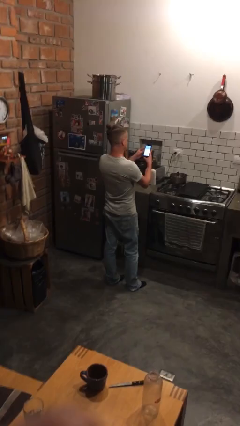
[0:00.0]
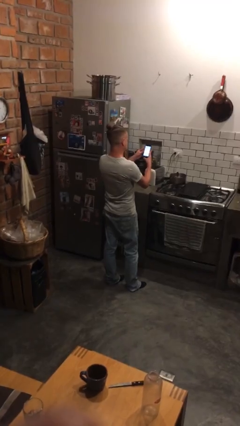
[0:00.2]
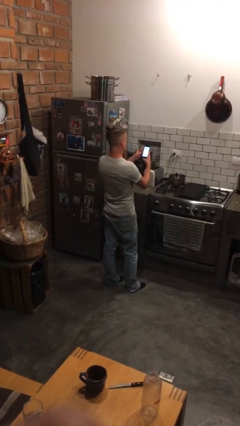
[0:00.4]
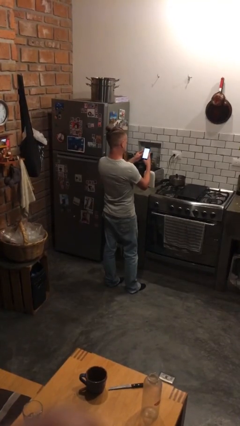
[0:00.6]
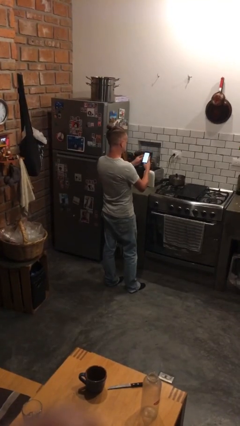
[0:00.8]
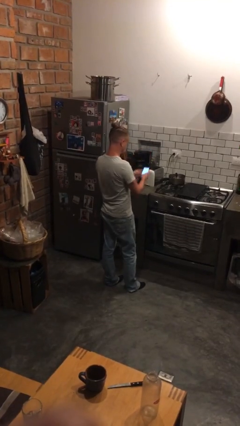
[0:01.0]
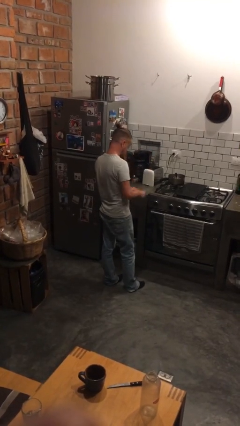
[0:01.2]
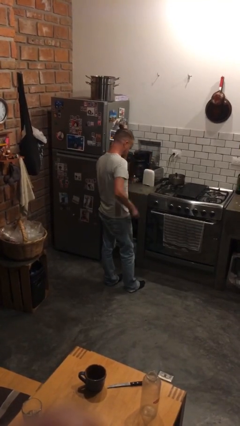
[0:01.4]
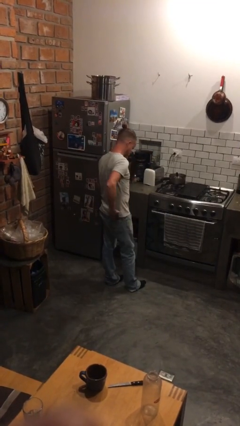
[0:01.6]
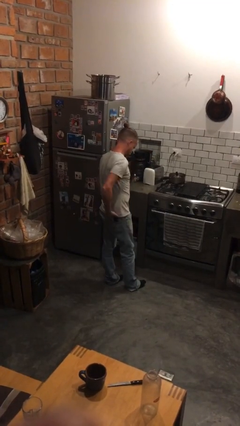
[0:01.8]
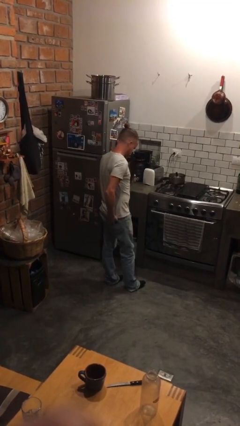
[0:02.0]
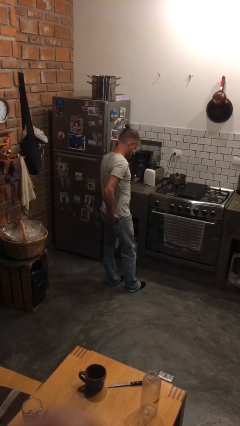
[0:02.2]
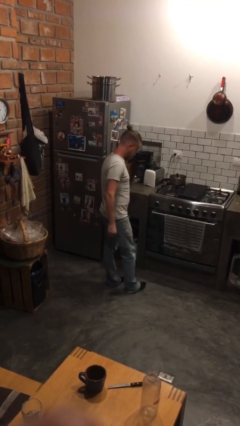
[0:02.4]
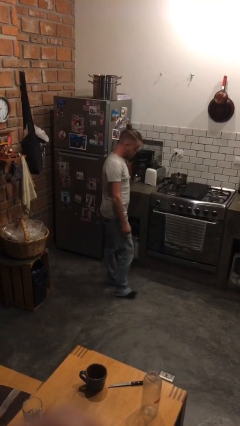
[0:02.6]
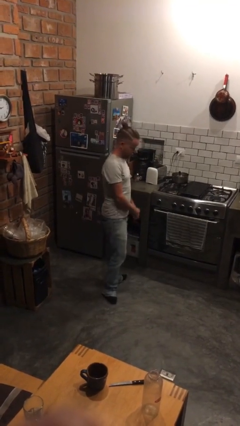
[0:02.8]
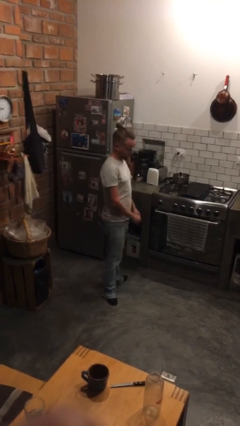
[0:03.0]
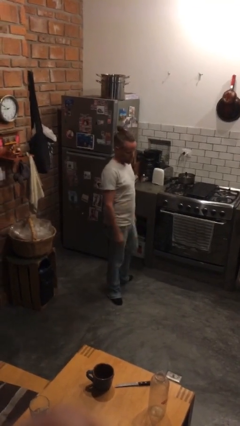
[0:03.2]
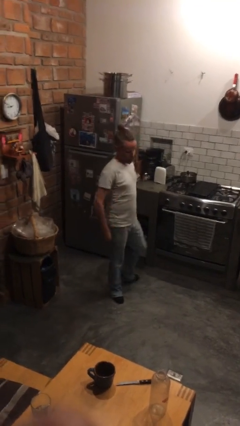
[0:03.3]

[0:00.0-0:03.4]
person puts phone into pocket

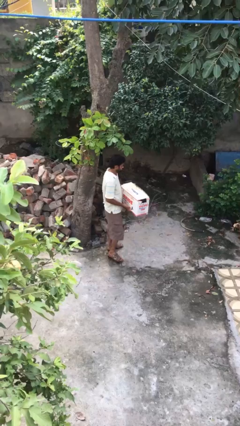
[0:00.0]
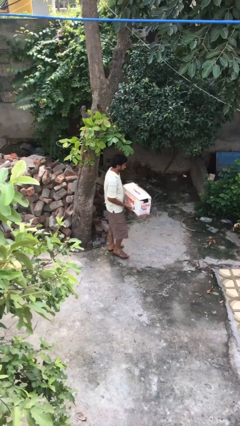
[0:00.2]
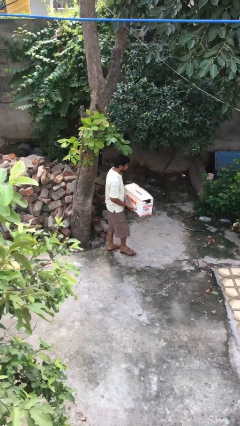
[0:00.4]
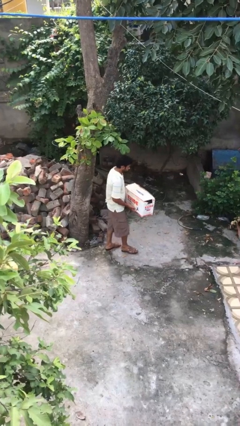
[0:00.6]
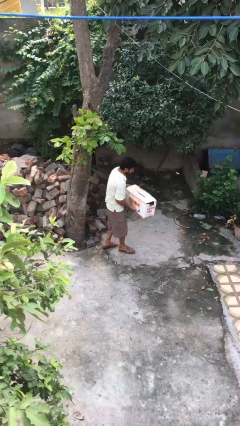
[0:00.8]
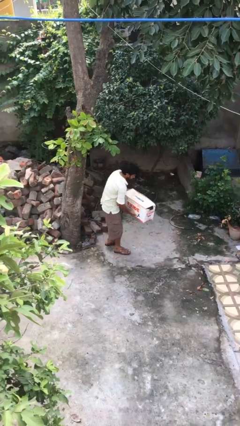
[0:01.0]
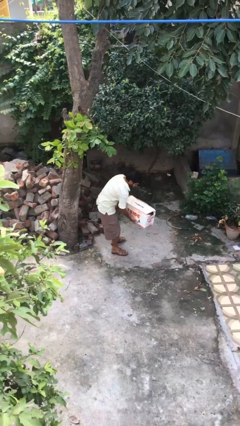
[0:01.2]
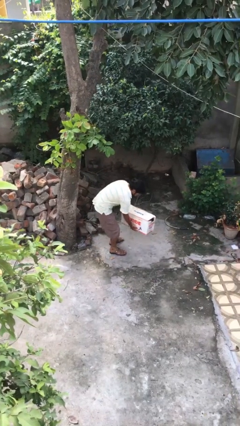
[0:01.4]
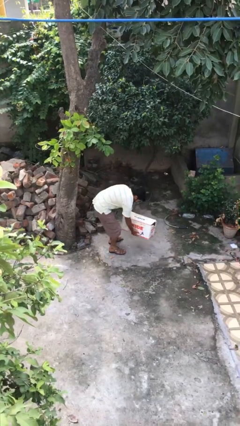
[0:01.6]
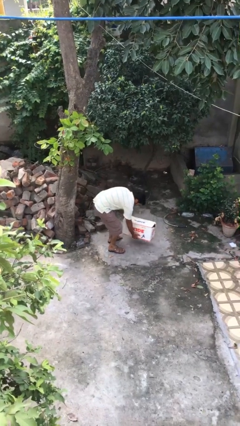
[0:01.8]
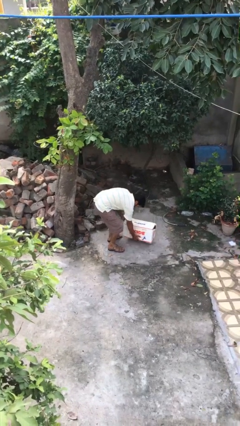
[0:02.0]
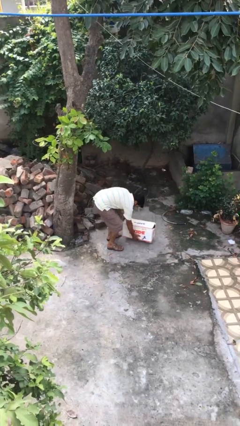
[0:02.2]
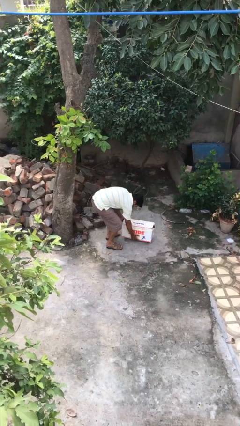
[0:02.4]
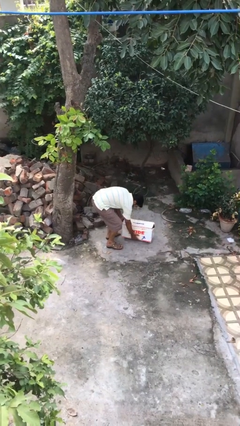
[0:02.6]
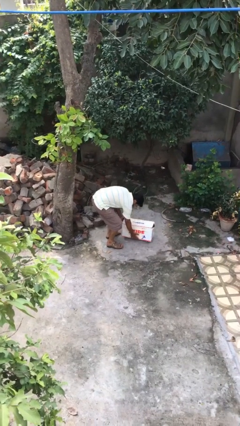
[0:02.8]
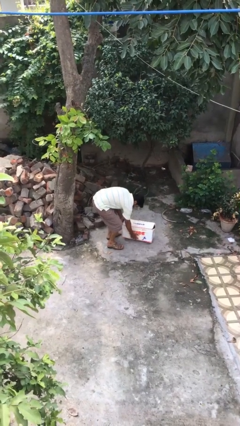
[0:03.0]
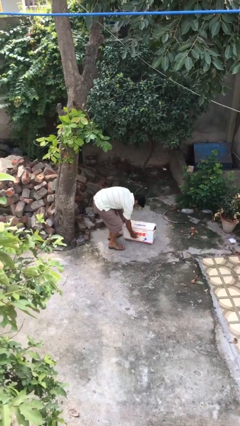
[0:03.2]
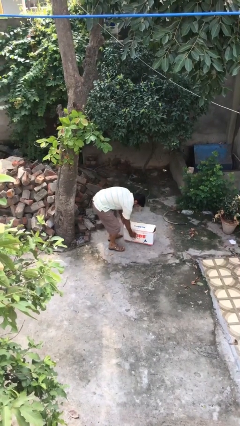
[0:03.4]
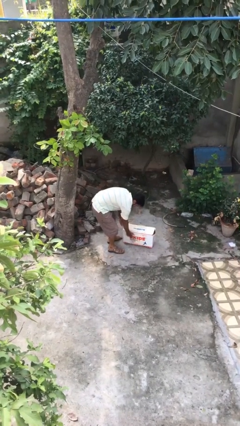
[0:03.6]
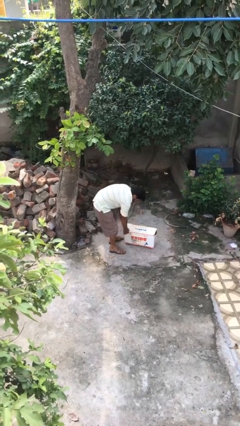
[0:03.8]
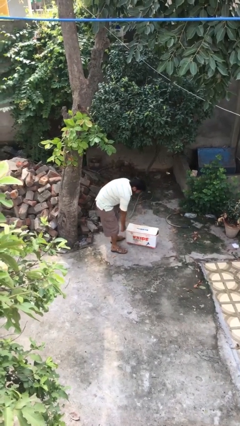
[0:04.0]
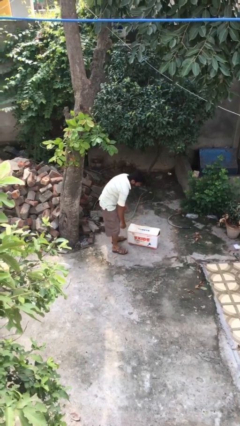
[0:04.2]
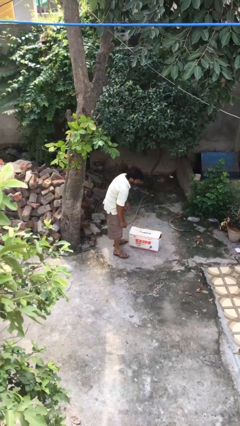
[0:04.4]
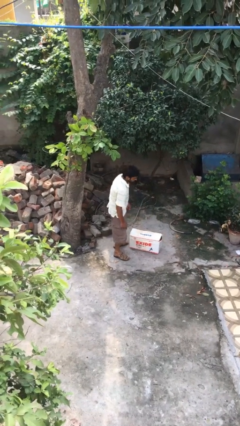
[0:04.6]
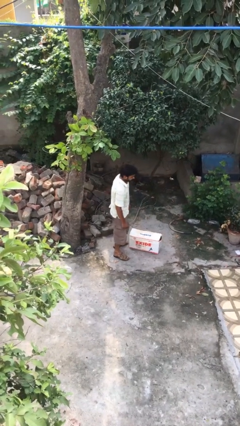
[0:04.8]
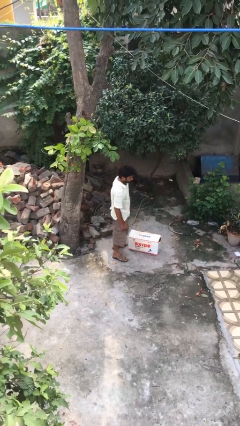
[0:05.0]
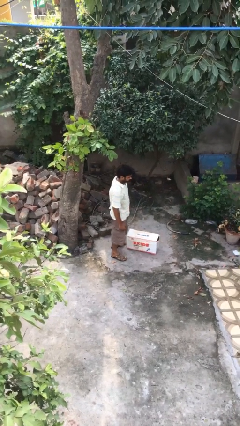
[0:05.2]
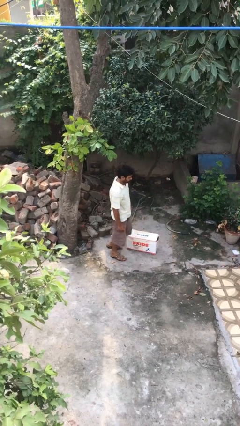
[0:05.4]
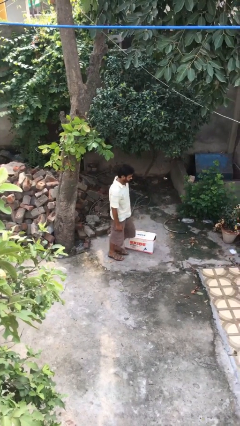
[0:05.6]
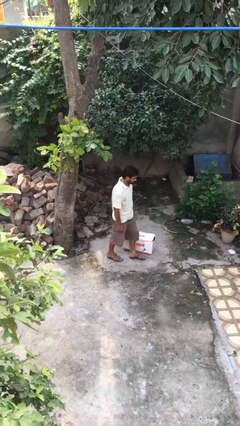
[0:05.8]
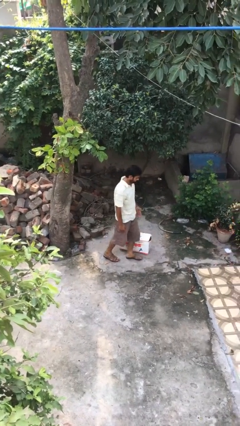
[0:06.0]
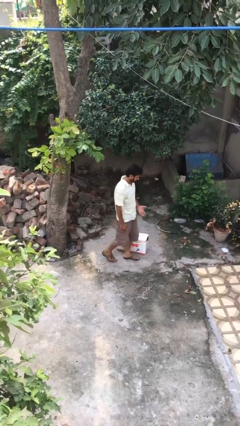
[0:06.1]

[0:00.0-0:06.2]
person puts down object on floor

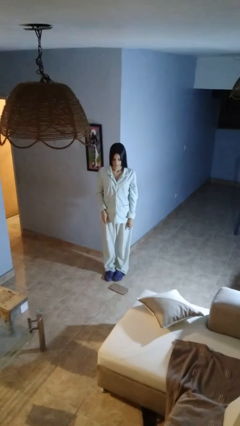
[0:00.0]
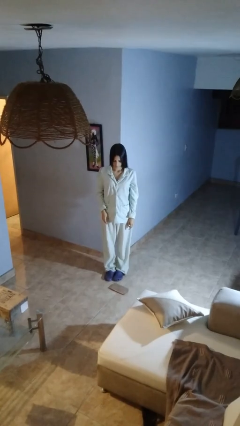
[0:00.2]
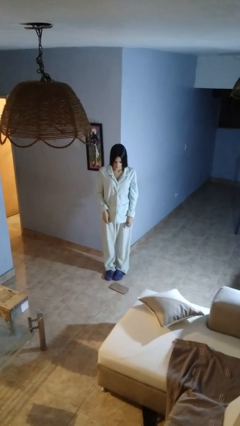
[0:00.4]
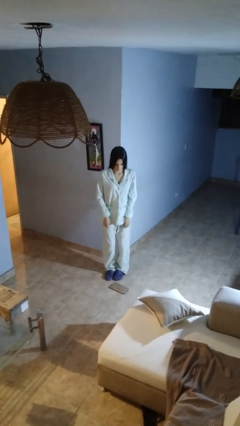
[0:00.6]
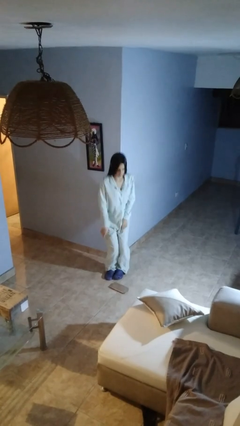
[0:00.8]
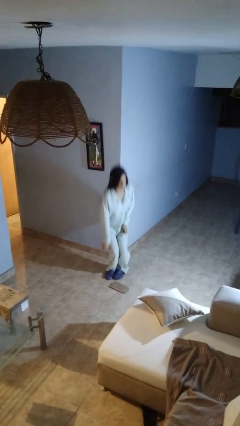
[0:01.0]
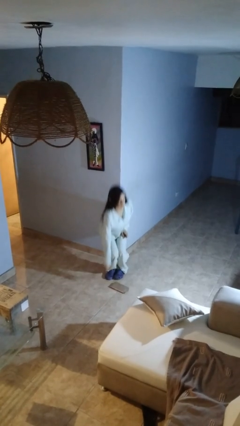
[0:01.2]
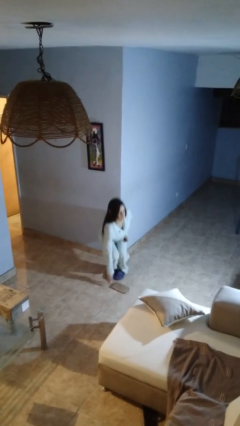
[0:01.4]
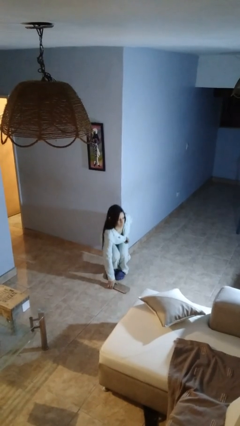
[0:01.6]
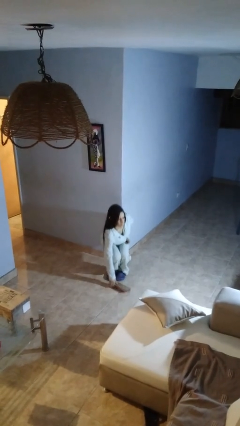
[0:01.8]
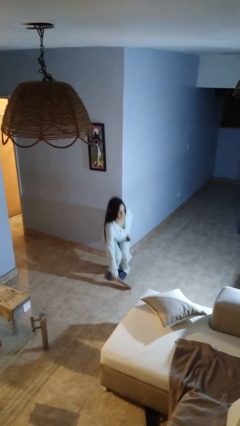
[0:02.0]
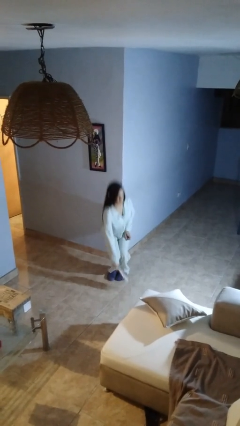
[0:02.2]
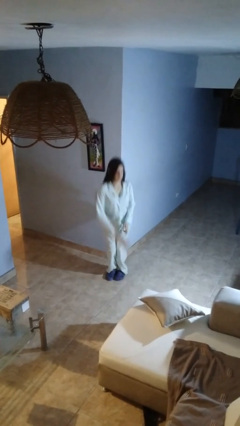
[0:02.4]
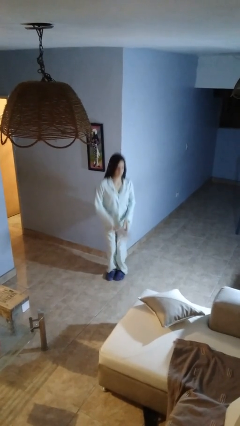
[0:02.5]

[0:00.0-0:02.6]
person picks up object from floor

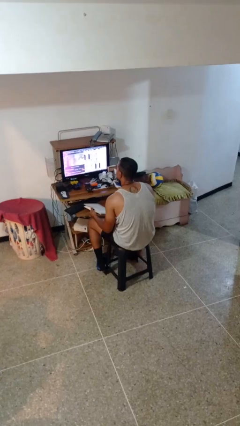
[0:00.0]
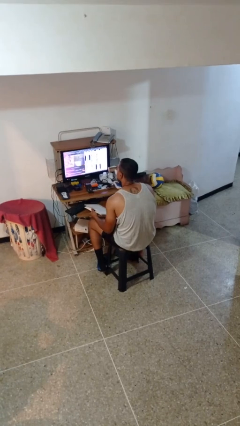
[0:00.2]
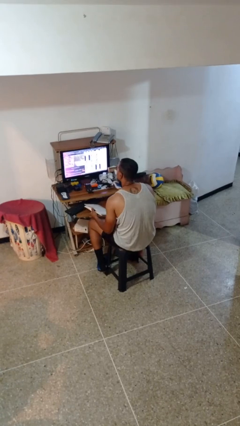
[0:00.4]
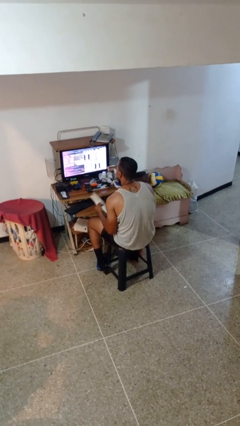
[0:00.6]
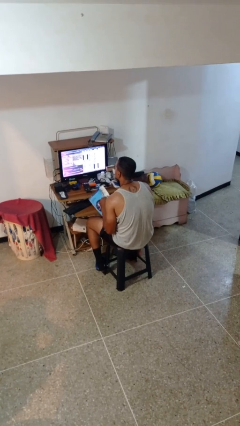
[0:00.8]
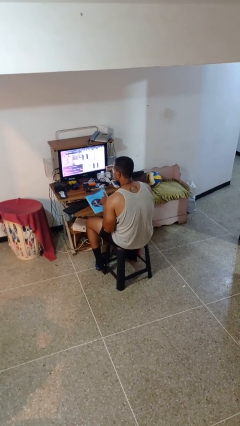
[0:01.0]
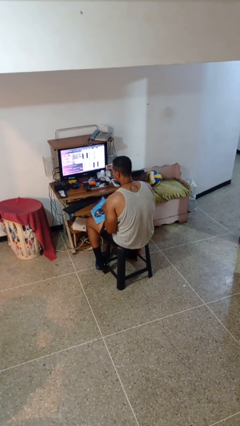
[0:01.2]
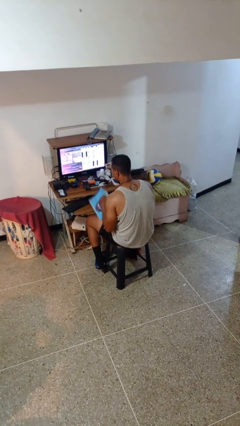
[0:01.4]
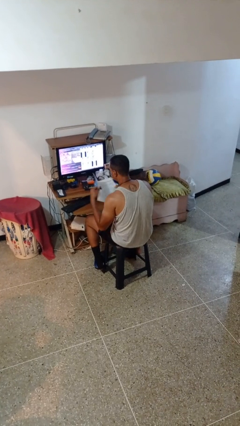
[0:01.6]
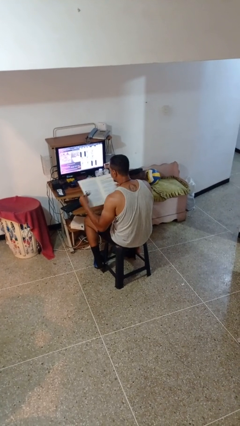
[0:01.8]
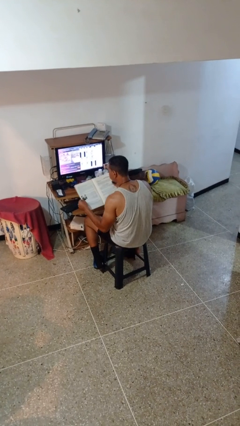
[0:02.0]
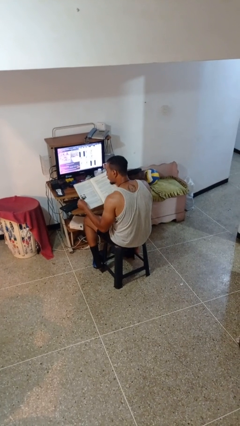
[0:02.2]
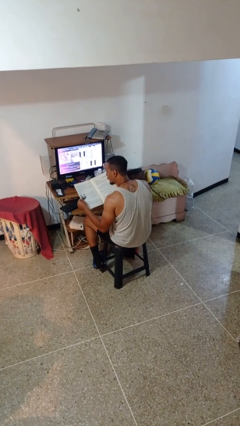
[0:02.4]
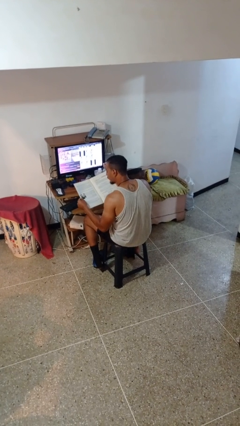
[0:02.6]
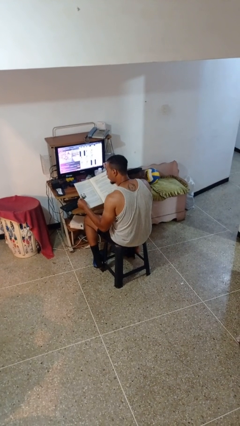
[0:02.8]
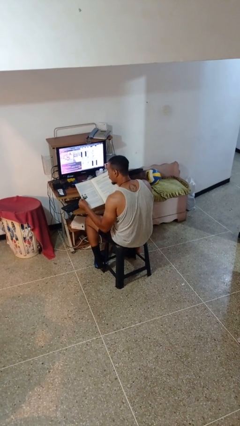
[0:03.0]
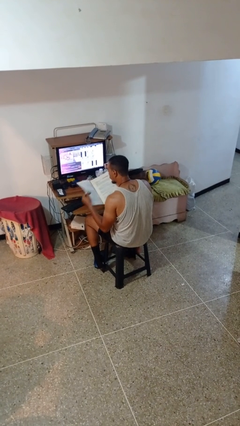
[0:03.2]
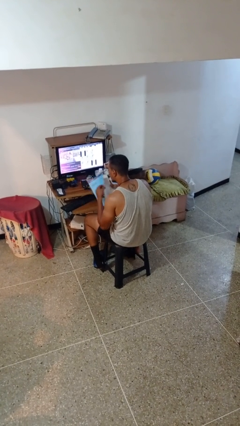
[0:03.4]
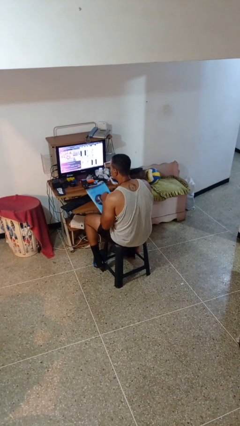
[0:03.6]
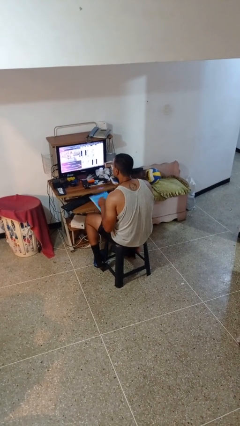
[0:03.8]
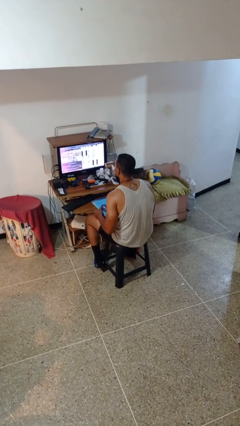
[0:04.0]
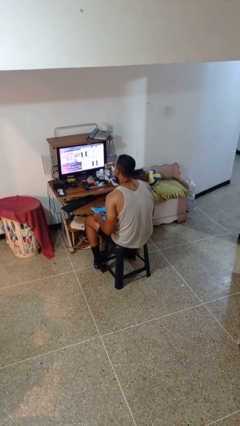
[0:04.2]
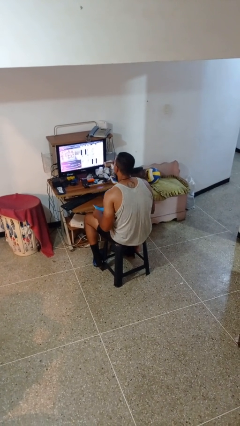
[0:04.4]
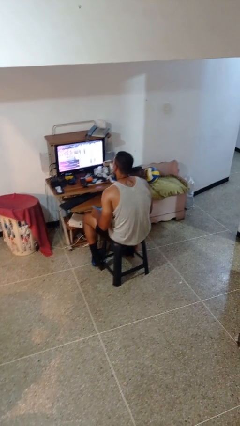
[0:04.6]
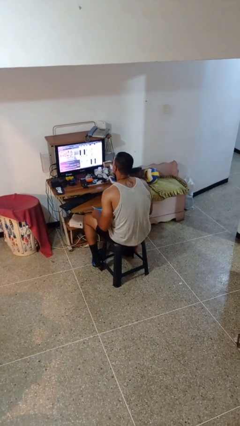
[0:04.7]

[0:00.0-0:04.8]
person reads magazine

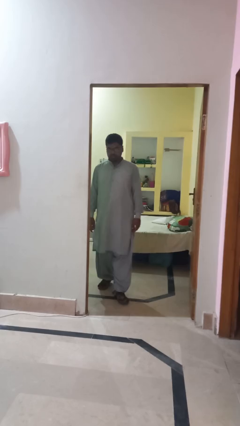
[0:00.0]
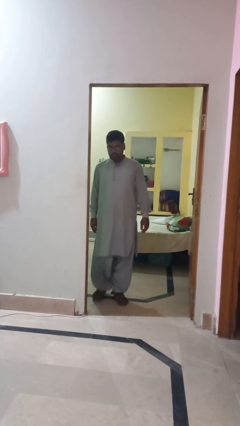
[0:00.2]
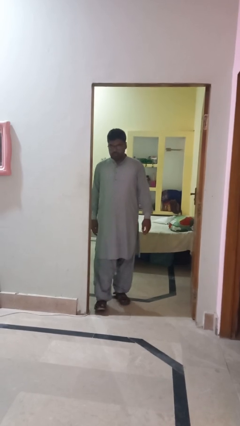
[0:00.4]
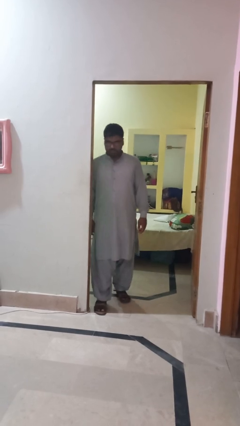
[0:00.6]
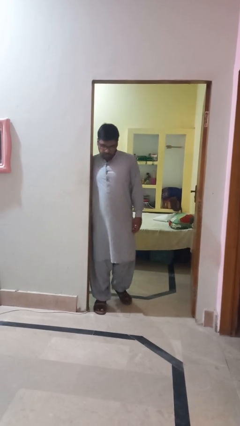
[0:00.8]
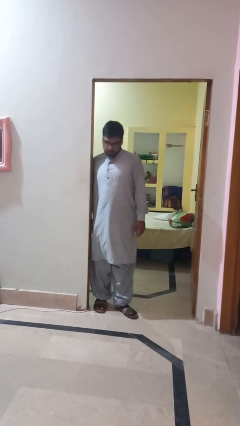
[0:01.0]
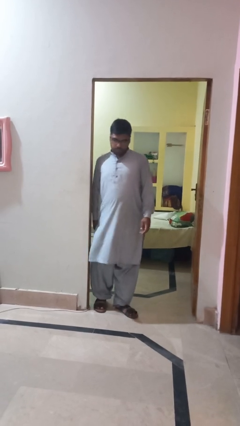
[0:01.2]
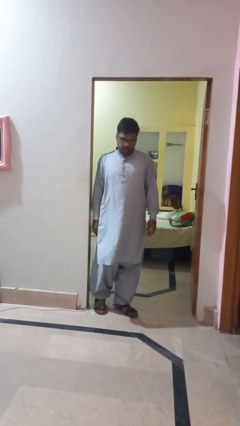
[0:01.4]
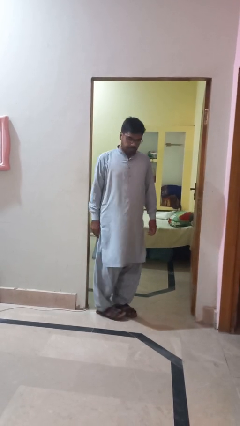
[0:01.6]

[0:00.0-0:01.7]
person bumps into wall
